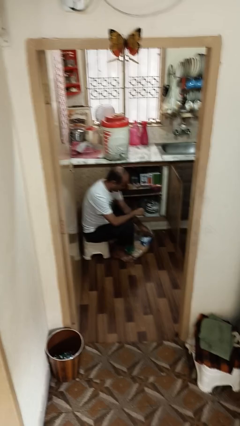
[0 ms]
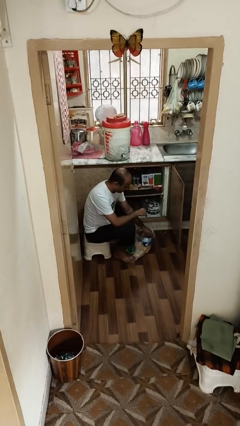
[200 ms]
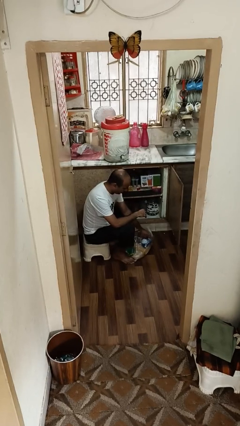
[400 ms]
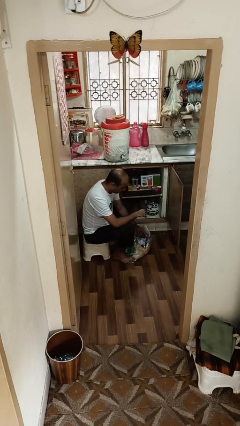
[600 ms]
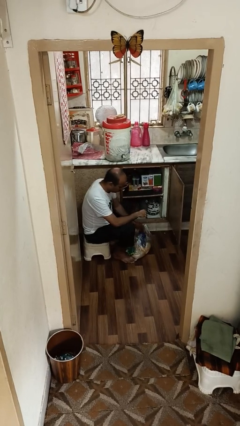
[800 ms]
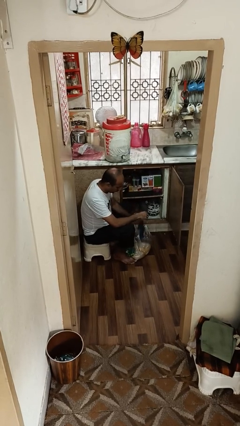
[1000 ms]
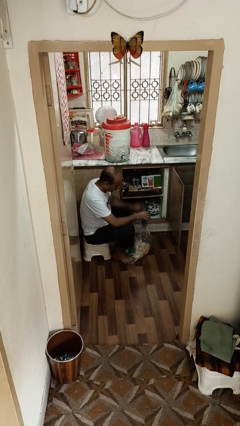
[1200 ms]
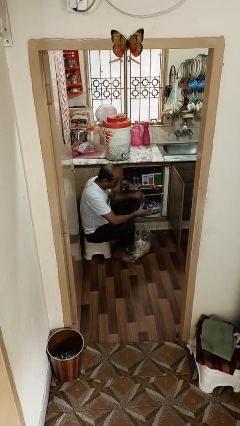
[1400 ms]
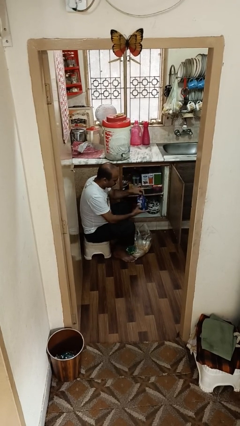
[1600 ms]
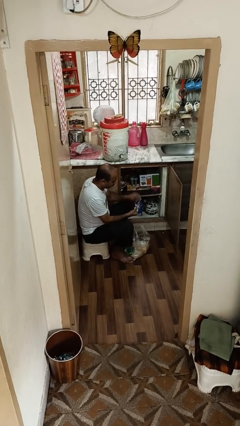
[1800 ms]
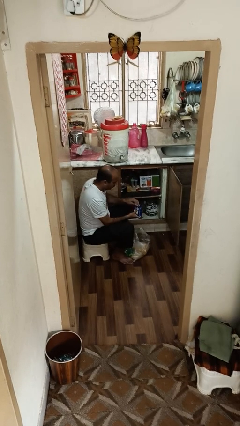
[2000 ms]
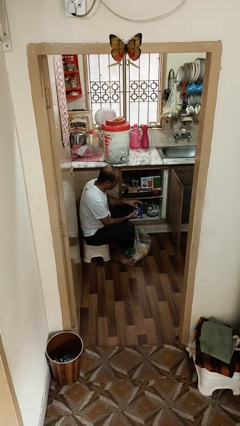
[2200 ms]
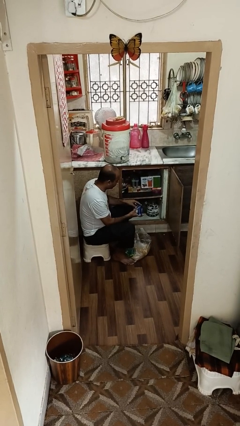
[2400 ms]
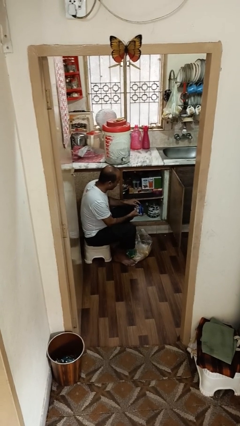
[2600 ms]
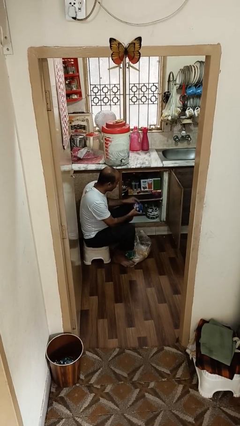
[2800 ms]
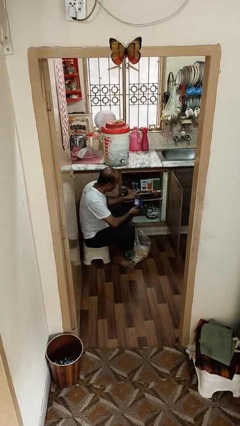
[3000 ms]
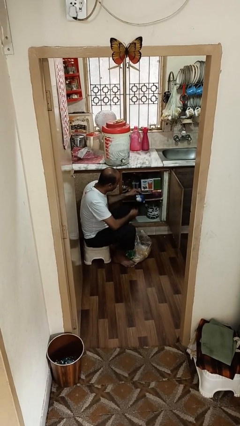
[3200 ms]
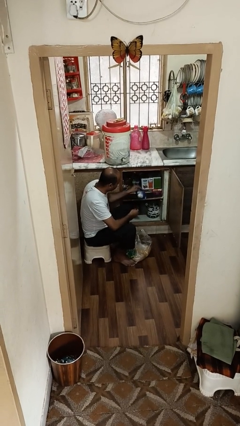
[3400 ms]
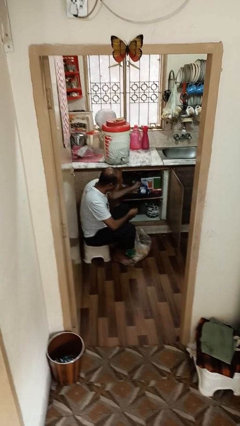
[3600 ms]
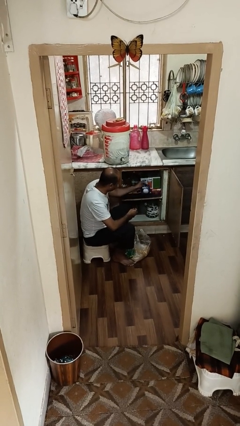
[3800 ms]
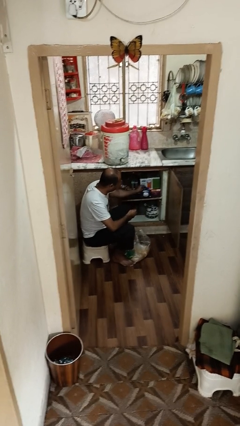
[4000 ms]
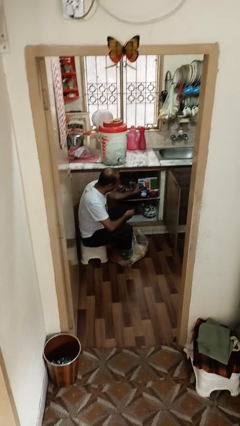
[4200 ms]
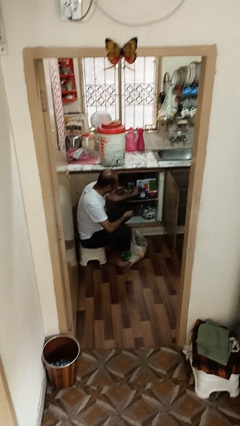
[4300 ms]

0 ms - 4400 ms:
person loads groceries into cabinet

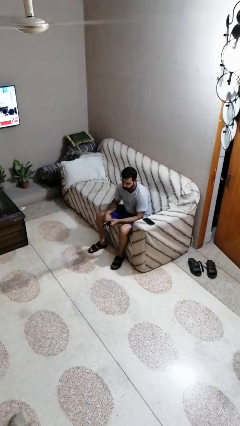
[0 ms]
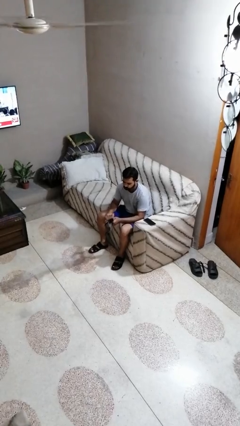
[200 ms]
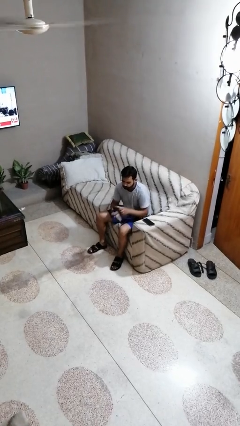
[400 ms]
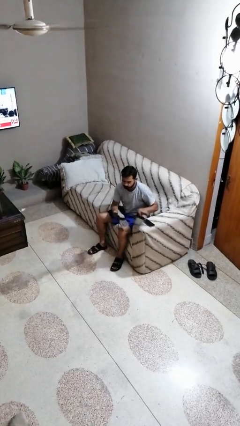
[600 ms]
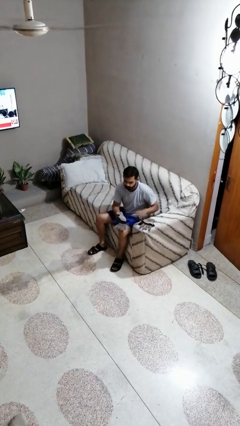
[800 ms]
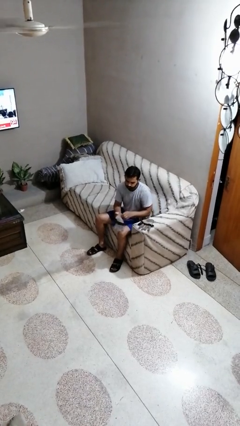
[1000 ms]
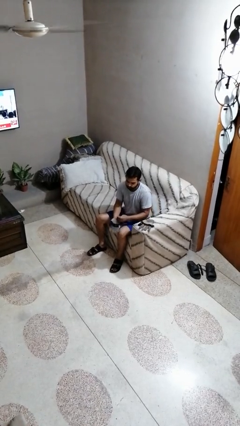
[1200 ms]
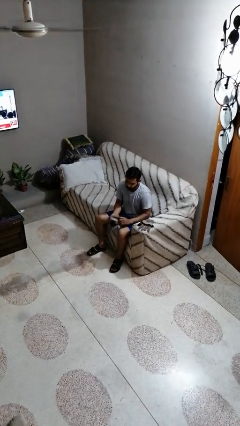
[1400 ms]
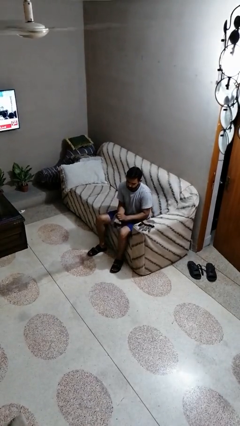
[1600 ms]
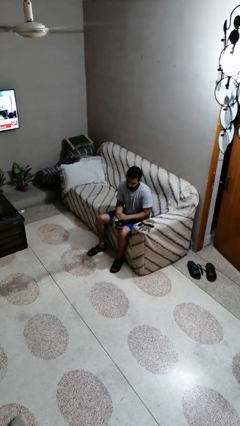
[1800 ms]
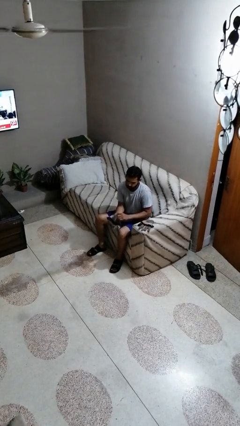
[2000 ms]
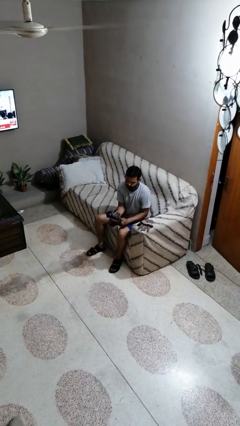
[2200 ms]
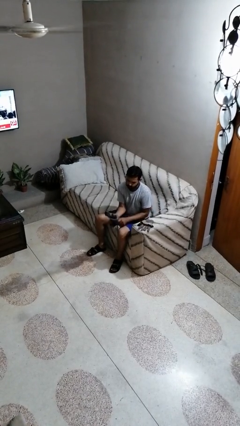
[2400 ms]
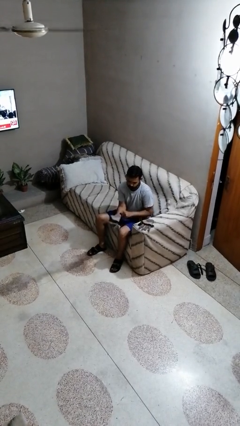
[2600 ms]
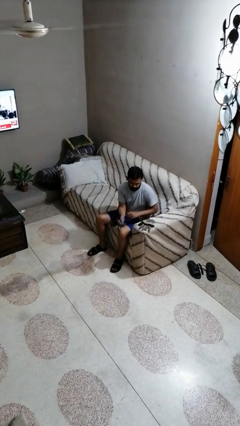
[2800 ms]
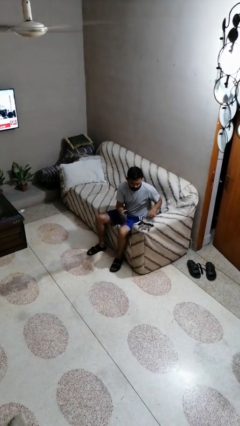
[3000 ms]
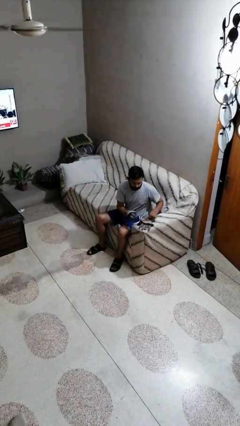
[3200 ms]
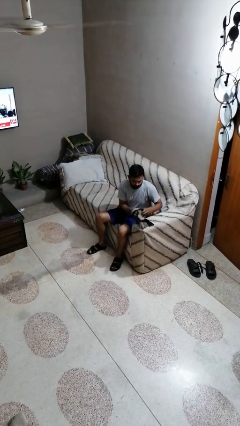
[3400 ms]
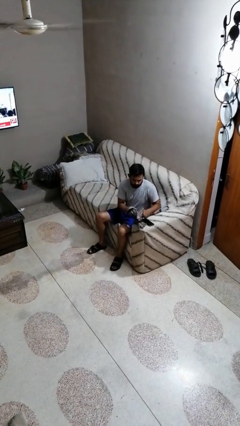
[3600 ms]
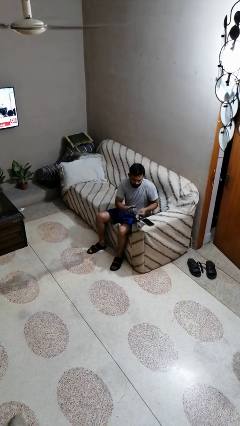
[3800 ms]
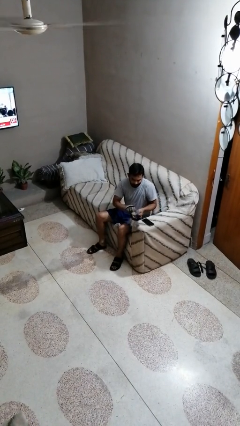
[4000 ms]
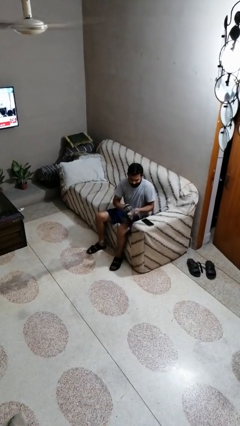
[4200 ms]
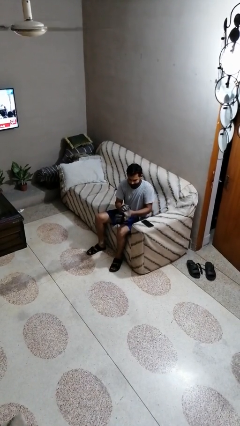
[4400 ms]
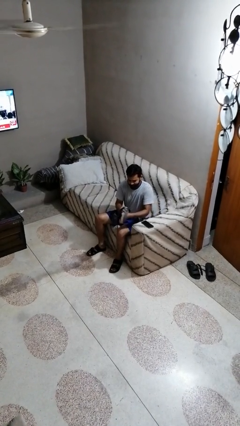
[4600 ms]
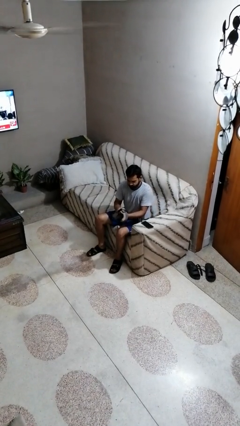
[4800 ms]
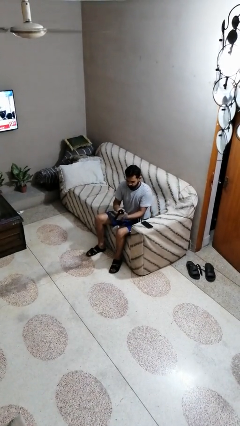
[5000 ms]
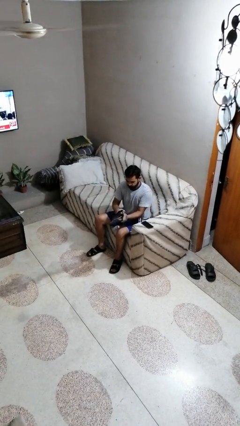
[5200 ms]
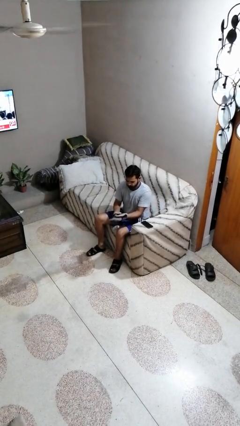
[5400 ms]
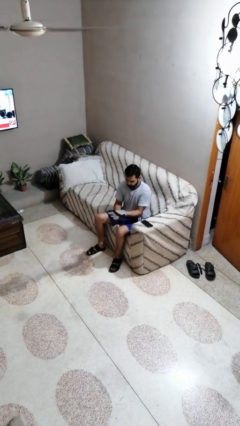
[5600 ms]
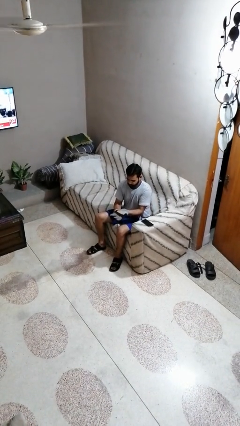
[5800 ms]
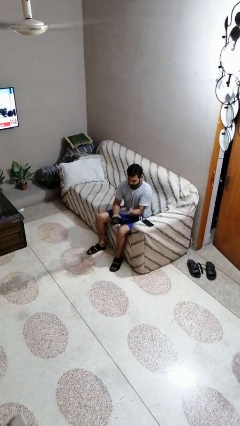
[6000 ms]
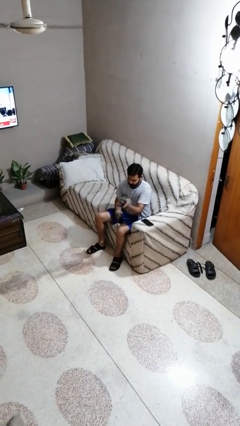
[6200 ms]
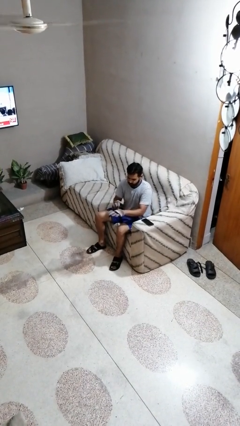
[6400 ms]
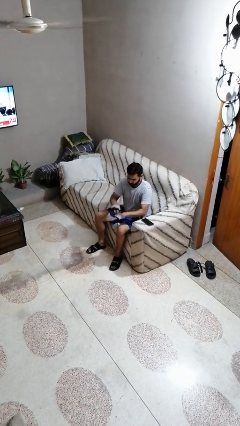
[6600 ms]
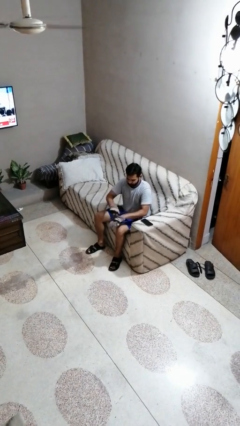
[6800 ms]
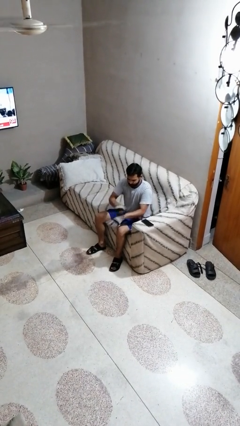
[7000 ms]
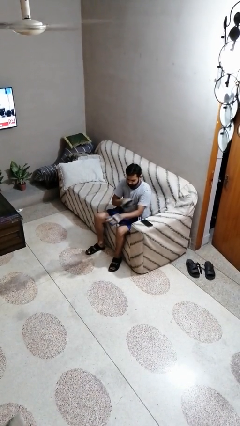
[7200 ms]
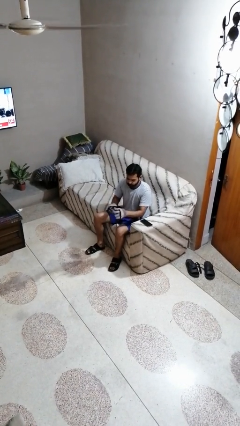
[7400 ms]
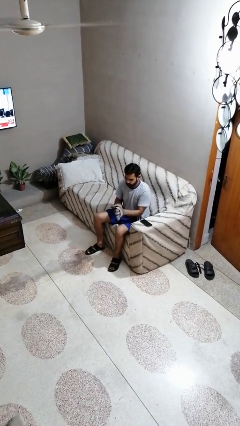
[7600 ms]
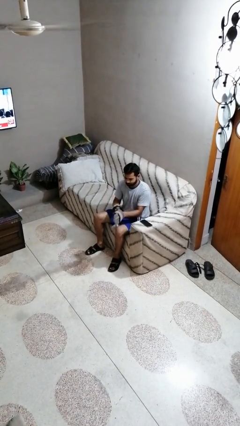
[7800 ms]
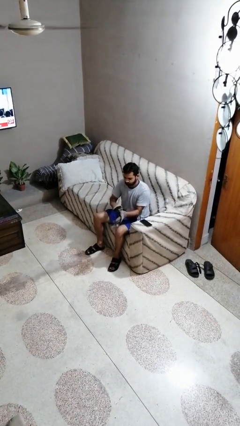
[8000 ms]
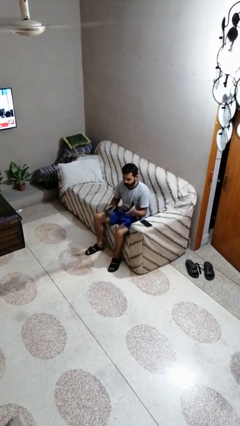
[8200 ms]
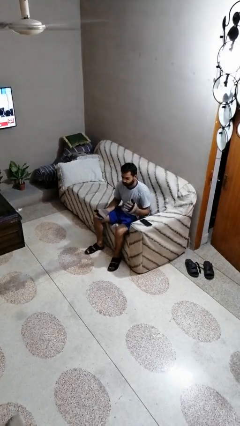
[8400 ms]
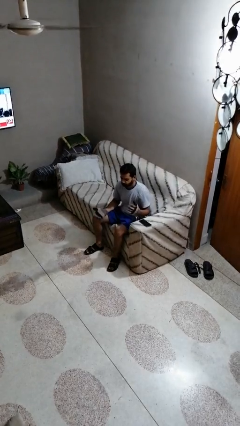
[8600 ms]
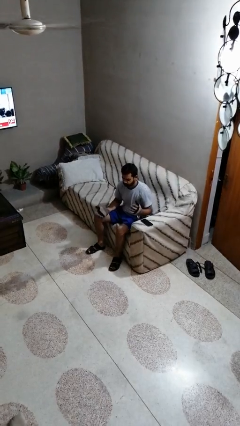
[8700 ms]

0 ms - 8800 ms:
person puts on gloves

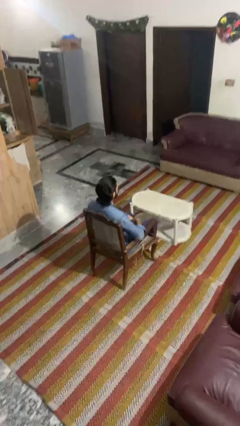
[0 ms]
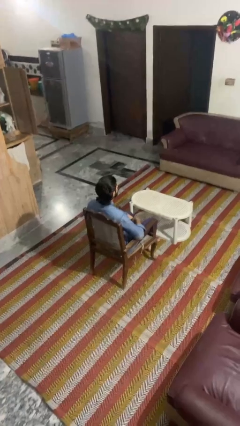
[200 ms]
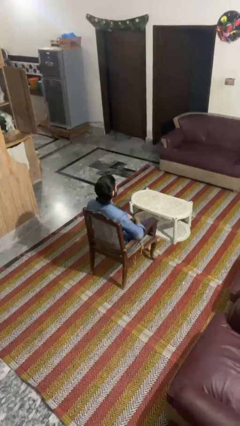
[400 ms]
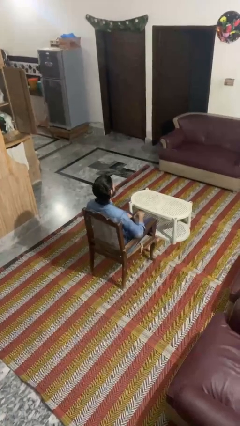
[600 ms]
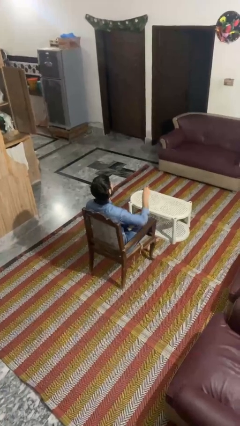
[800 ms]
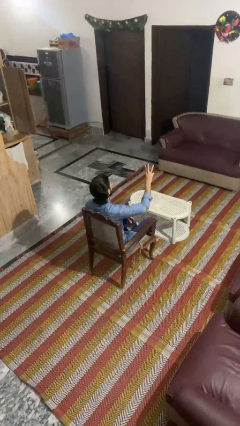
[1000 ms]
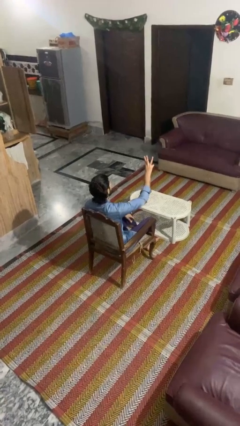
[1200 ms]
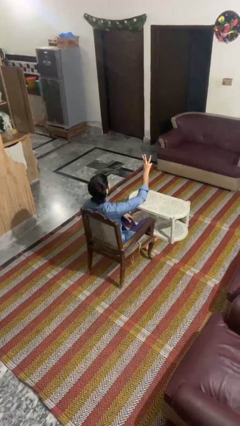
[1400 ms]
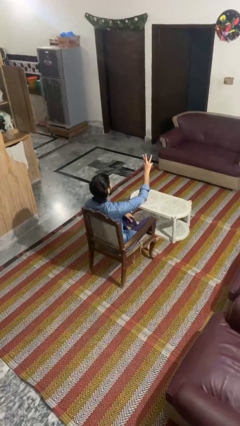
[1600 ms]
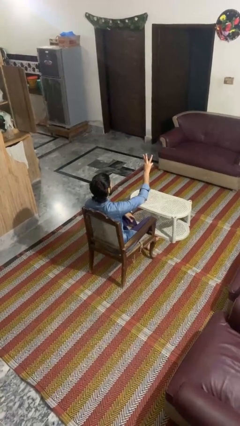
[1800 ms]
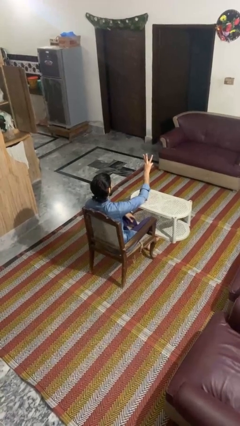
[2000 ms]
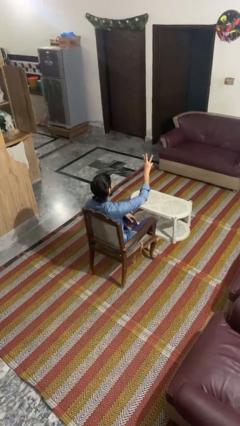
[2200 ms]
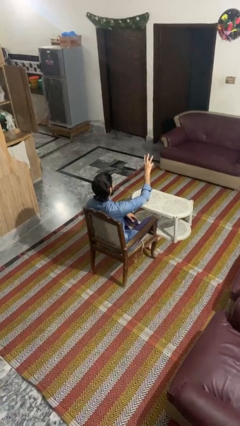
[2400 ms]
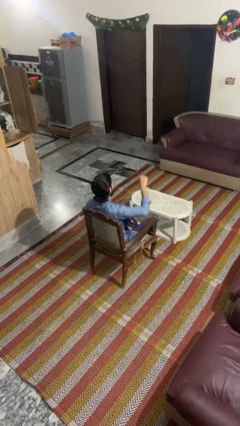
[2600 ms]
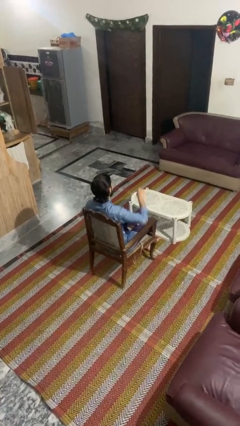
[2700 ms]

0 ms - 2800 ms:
person gestures number three

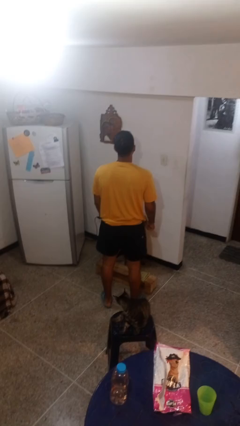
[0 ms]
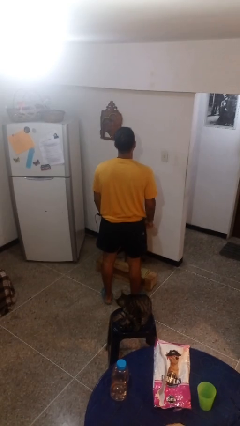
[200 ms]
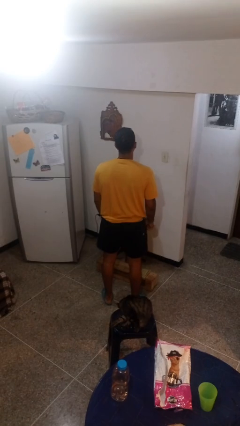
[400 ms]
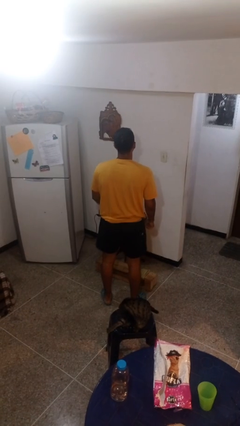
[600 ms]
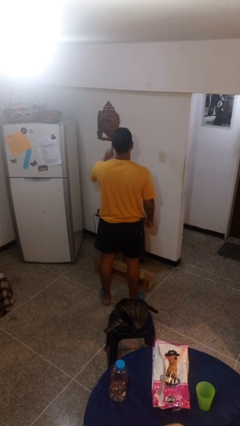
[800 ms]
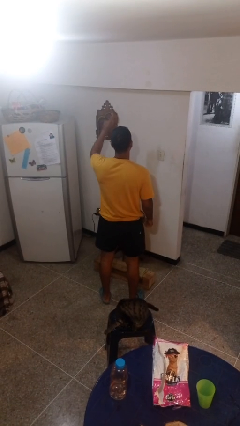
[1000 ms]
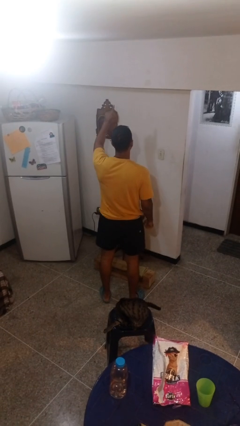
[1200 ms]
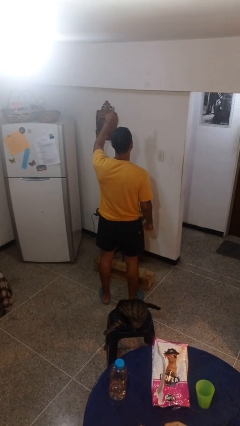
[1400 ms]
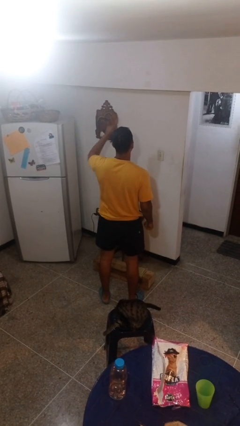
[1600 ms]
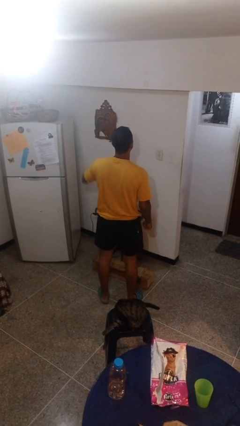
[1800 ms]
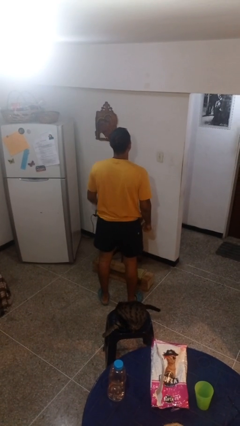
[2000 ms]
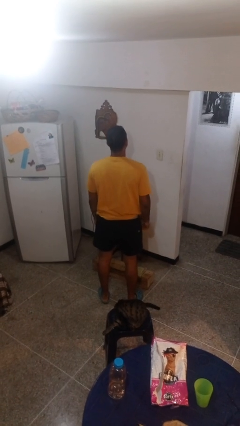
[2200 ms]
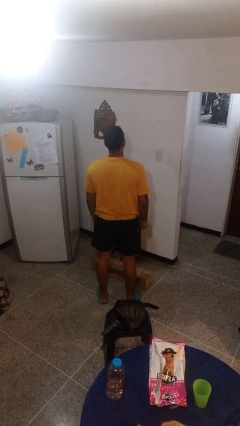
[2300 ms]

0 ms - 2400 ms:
person gestures number one
